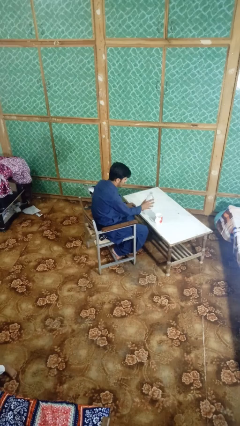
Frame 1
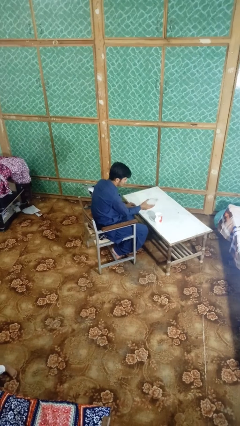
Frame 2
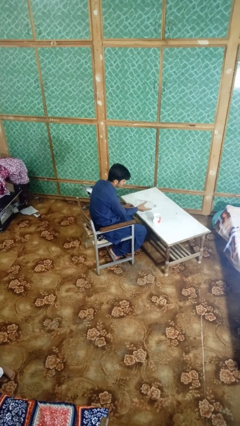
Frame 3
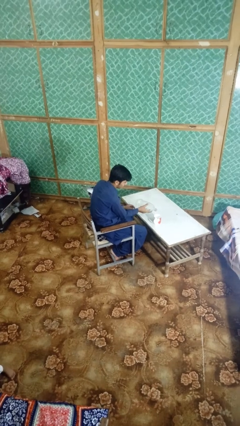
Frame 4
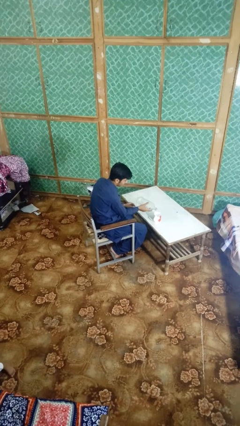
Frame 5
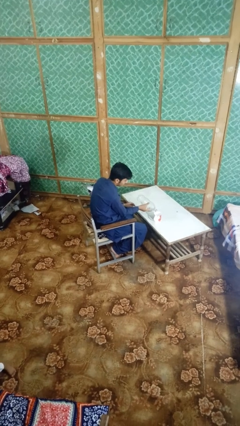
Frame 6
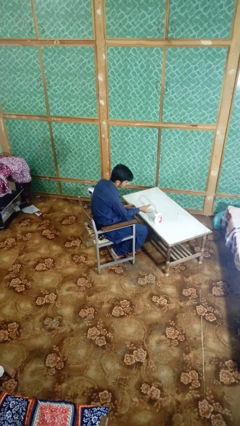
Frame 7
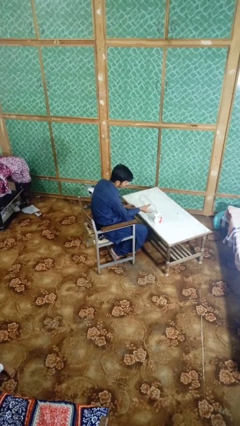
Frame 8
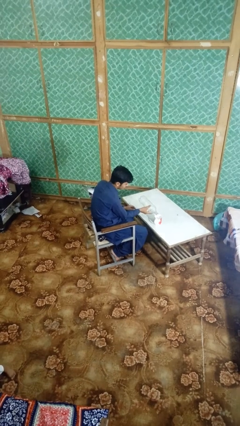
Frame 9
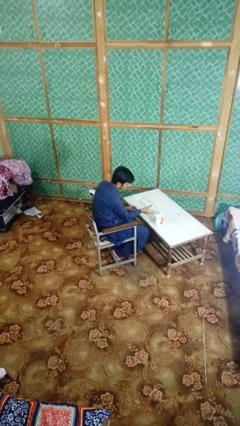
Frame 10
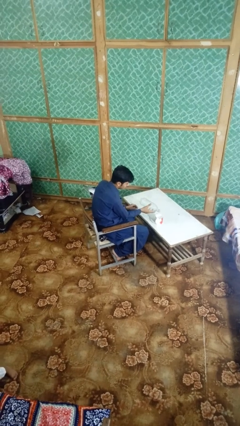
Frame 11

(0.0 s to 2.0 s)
person pours liquid into cup

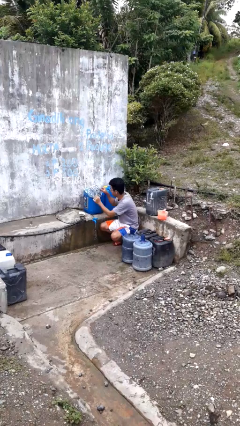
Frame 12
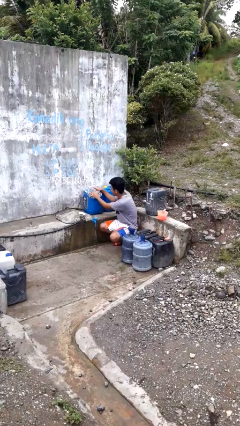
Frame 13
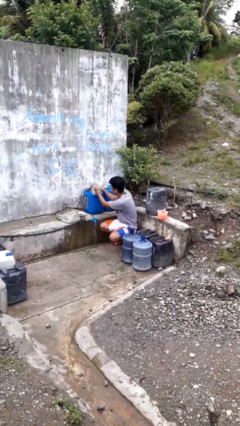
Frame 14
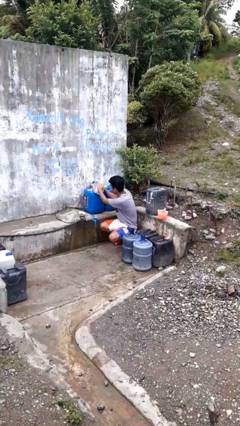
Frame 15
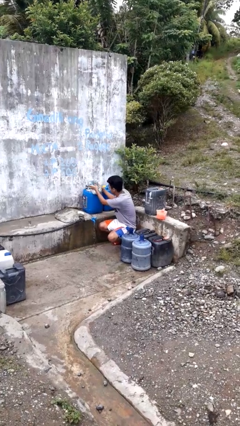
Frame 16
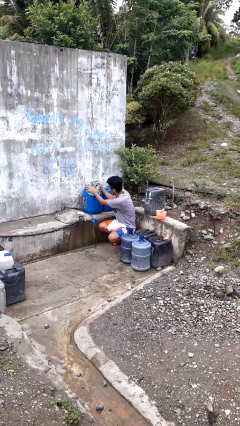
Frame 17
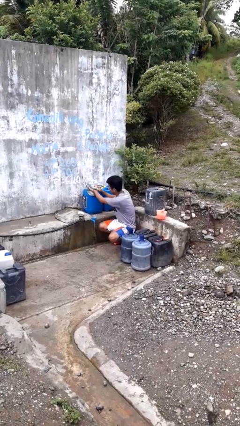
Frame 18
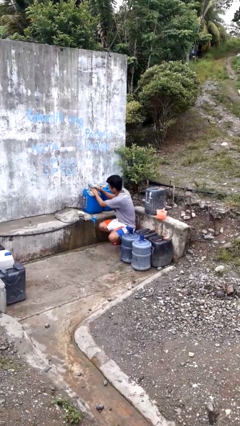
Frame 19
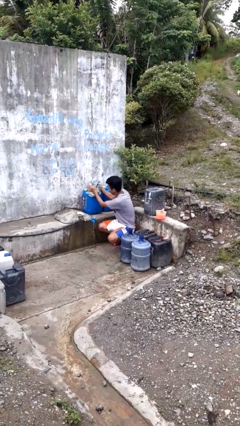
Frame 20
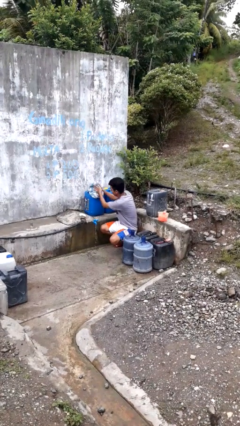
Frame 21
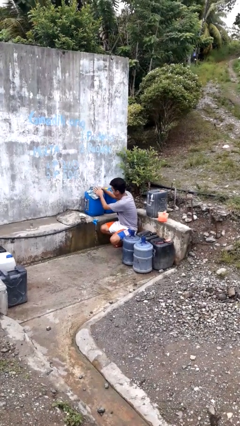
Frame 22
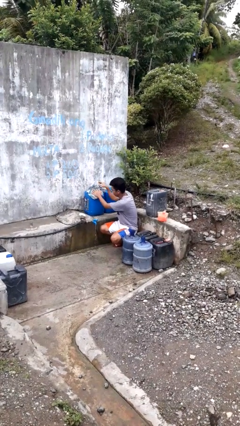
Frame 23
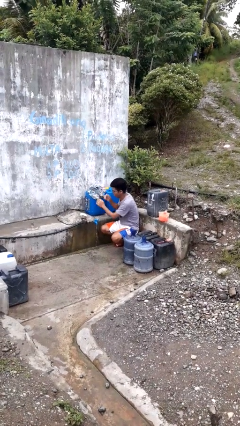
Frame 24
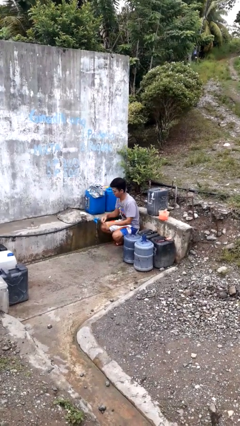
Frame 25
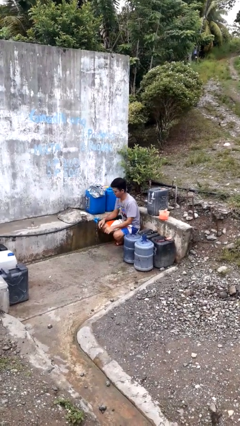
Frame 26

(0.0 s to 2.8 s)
person dries hands with towel

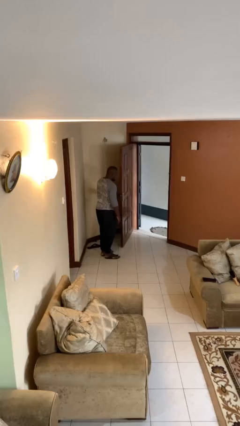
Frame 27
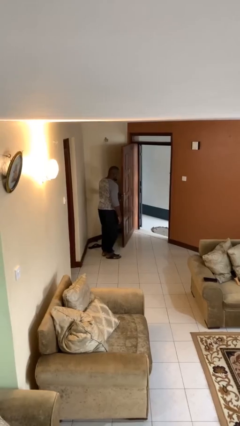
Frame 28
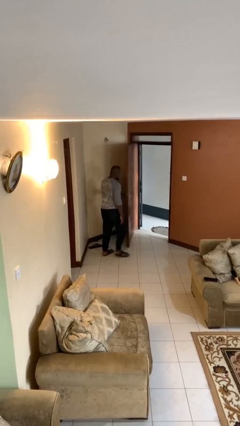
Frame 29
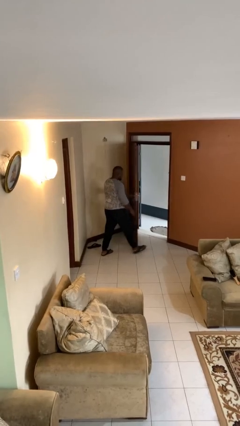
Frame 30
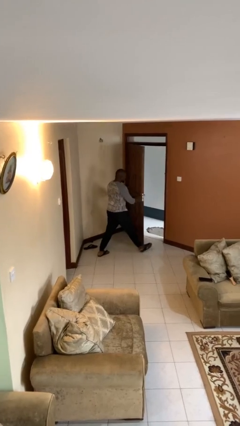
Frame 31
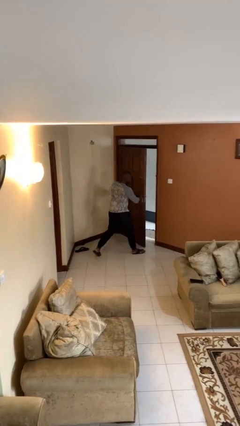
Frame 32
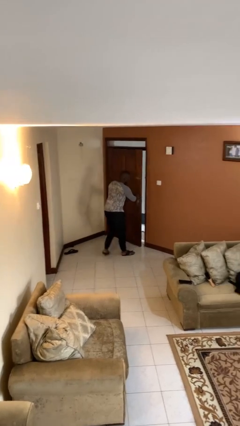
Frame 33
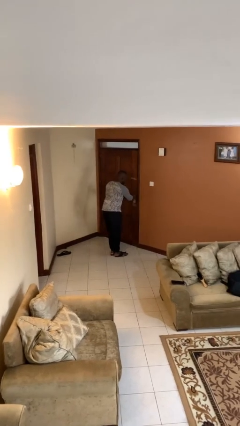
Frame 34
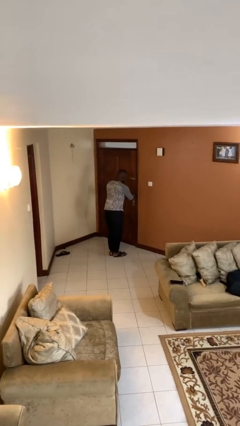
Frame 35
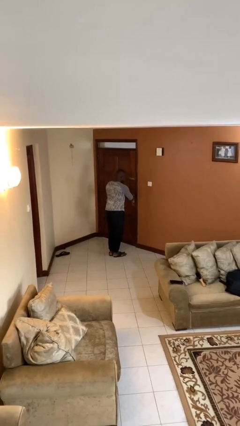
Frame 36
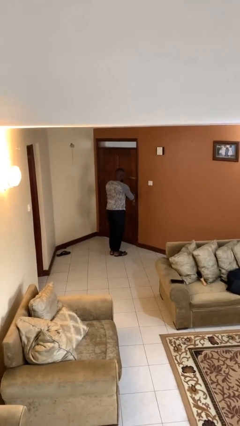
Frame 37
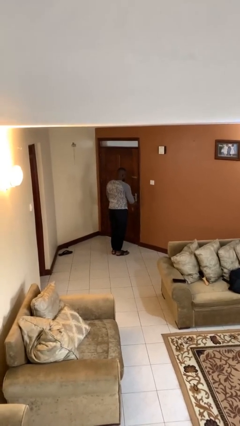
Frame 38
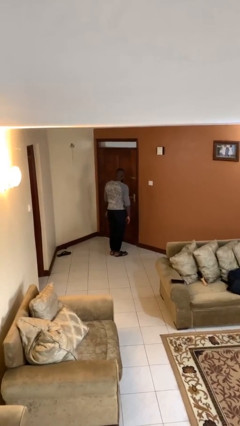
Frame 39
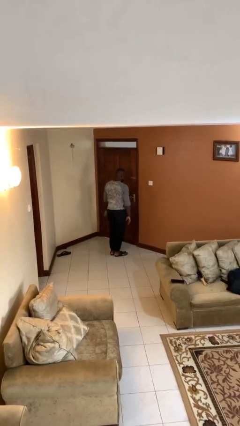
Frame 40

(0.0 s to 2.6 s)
person closes facility door

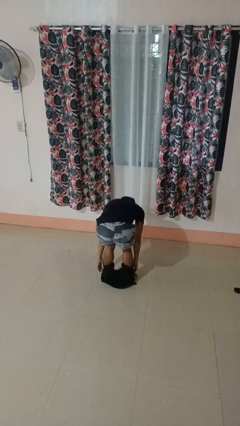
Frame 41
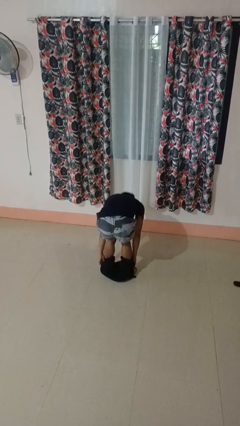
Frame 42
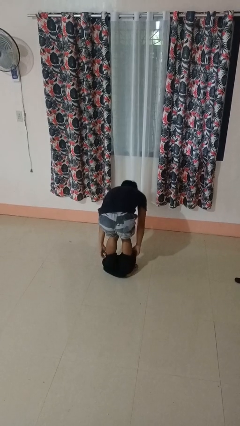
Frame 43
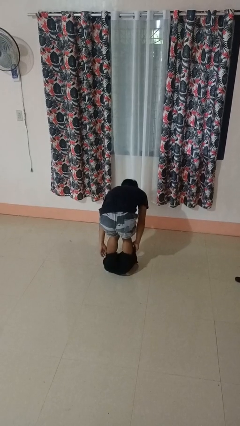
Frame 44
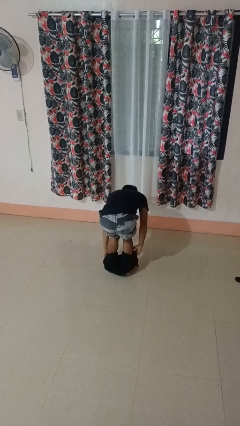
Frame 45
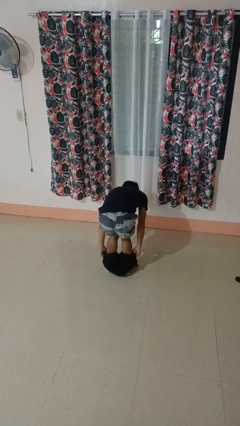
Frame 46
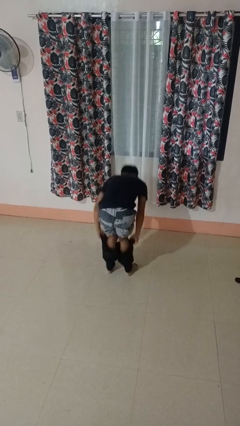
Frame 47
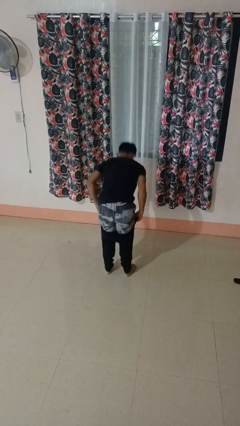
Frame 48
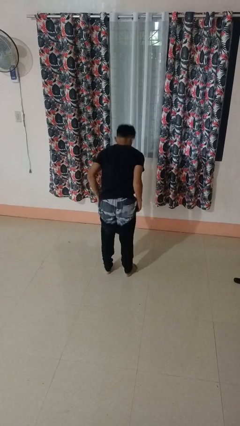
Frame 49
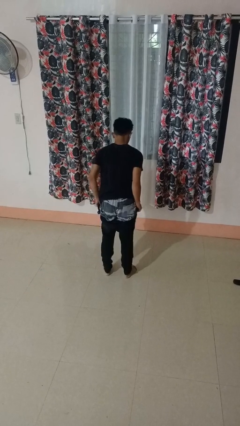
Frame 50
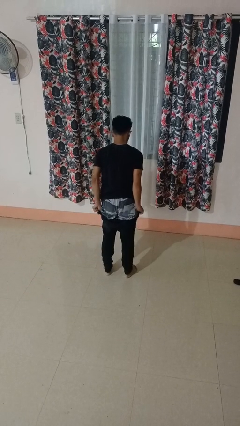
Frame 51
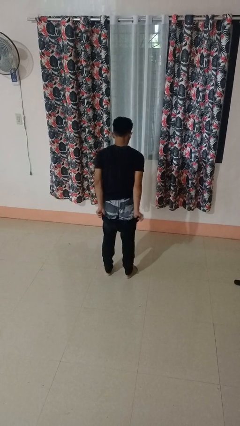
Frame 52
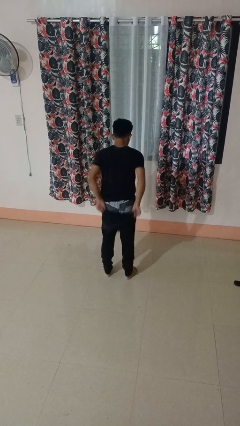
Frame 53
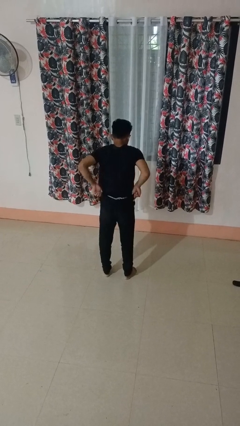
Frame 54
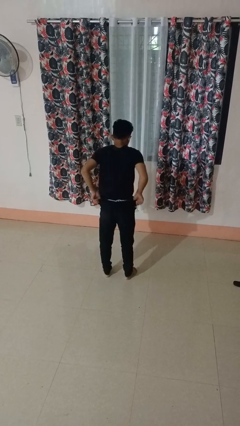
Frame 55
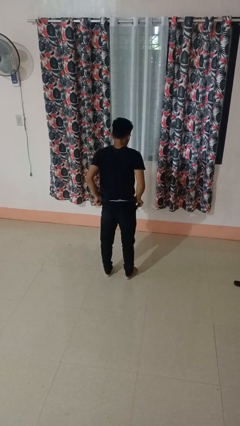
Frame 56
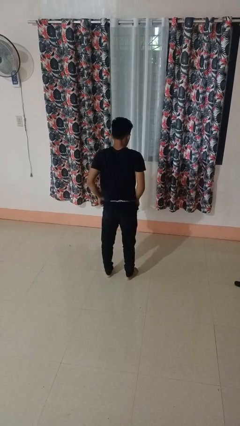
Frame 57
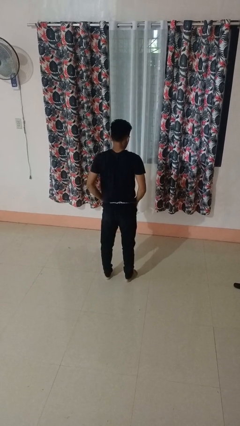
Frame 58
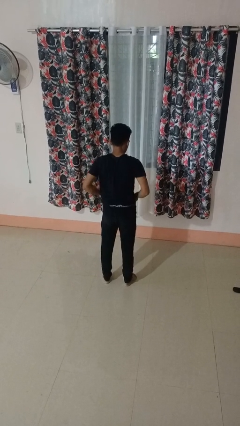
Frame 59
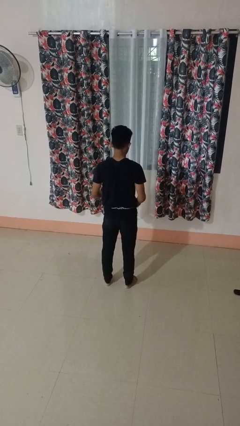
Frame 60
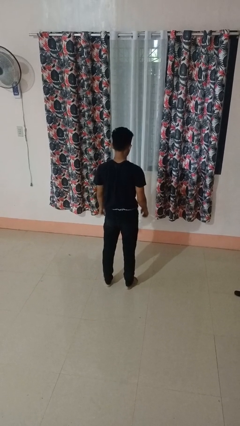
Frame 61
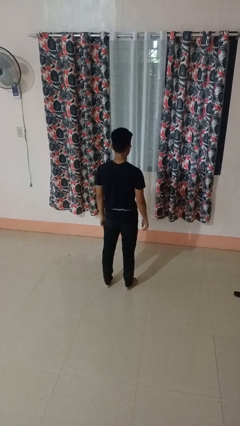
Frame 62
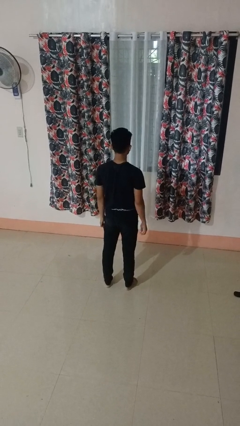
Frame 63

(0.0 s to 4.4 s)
person puts on pants

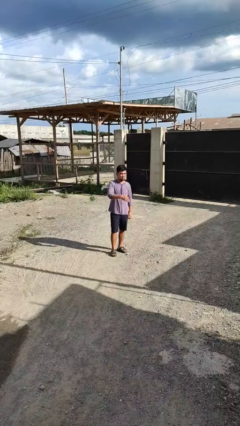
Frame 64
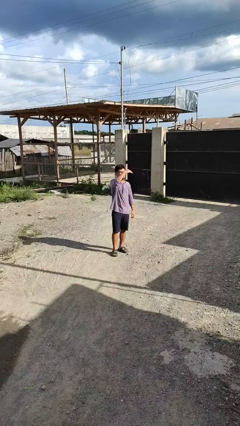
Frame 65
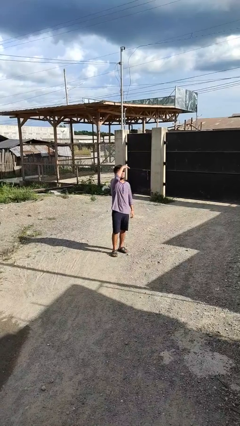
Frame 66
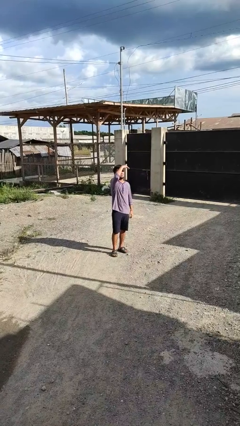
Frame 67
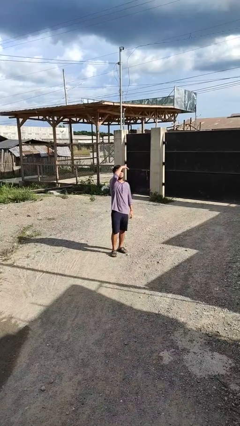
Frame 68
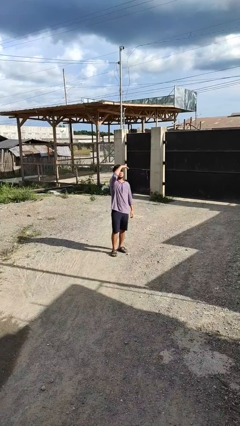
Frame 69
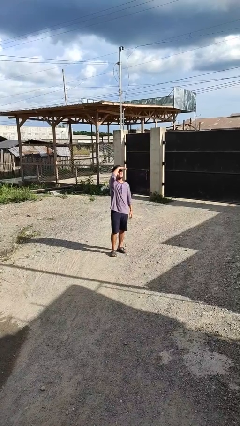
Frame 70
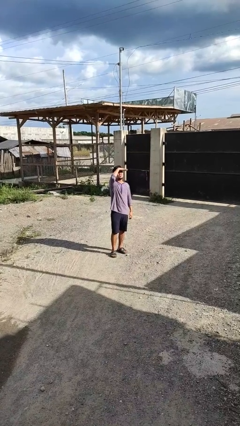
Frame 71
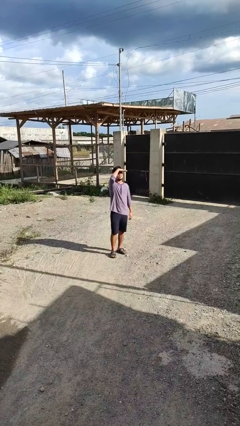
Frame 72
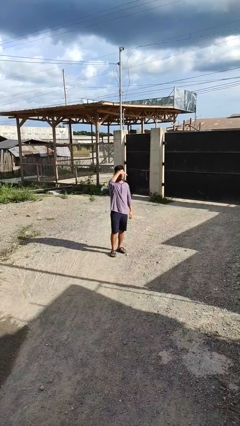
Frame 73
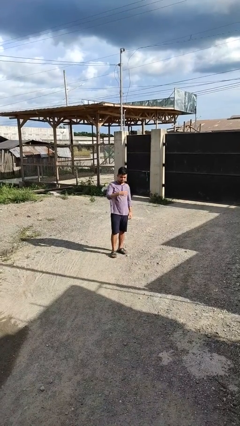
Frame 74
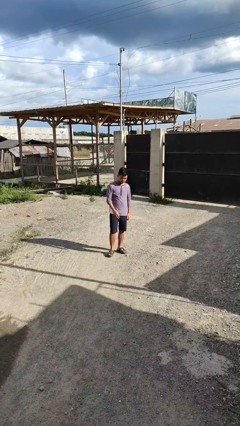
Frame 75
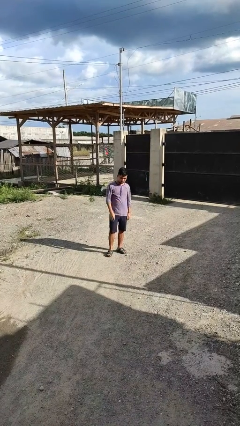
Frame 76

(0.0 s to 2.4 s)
person shades eyes

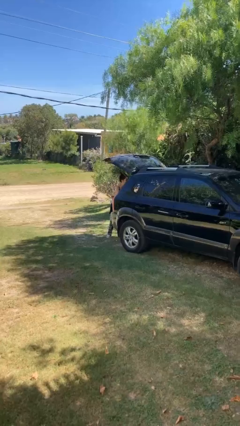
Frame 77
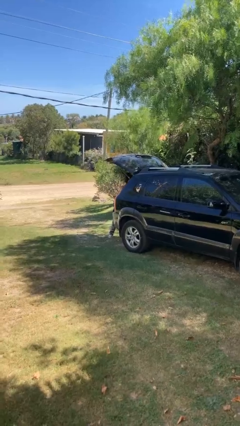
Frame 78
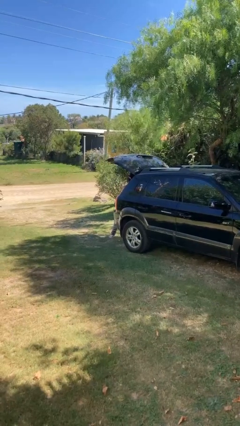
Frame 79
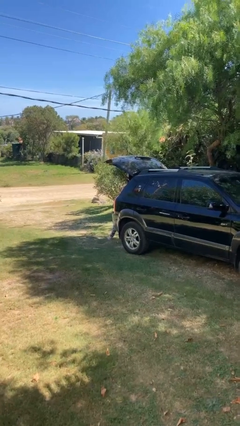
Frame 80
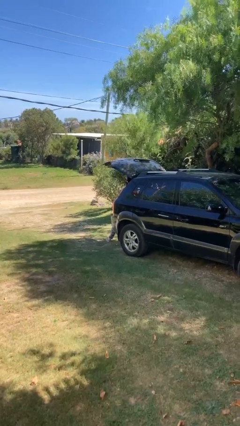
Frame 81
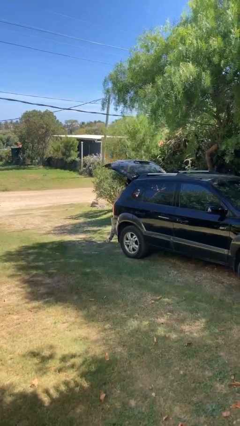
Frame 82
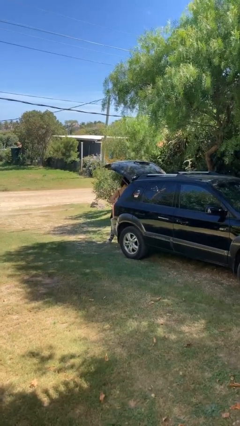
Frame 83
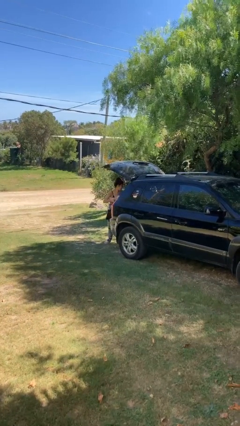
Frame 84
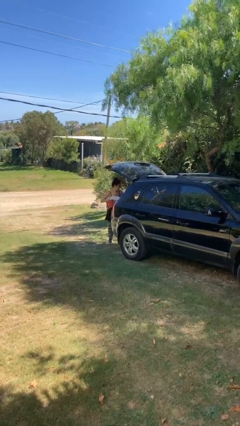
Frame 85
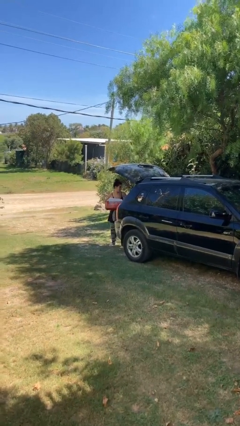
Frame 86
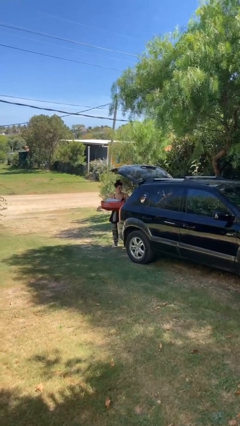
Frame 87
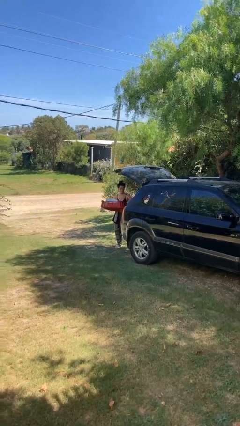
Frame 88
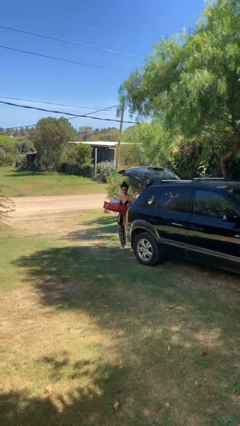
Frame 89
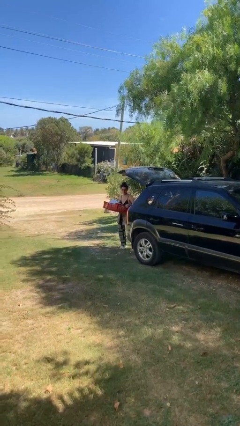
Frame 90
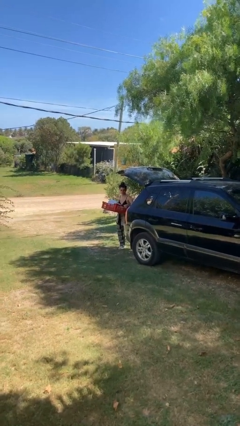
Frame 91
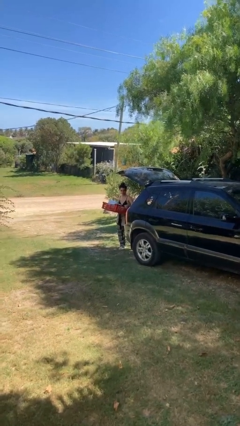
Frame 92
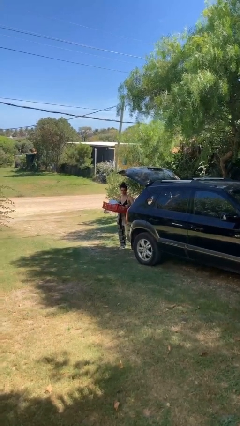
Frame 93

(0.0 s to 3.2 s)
person unloads car

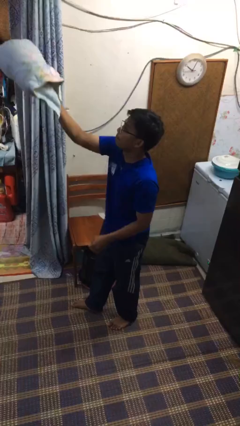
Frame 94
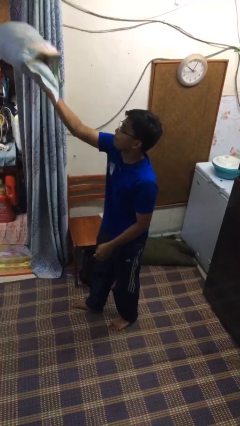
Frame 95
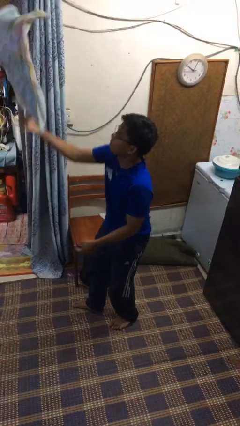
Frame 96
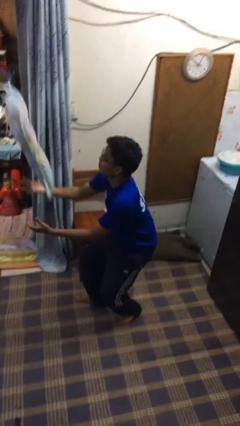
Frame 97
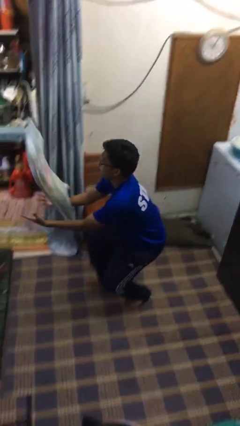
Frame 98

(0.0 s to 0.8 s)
person drops object
